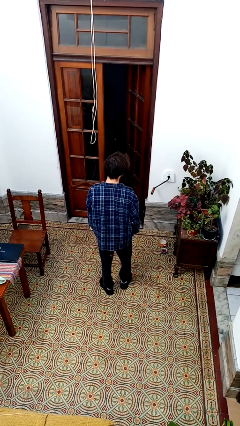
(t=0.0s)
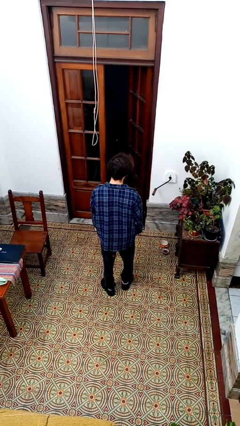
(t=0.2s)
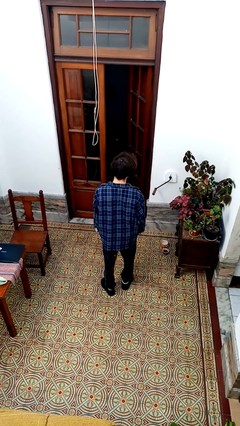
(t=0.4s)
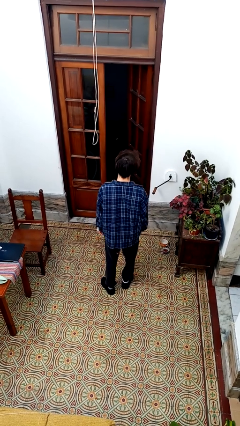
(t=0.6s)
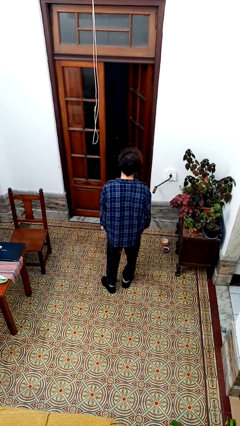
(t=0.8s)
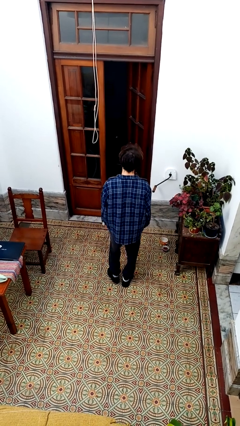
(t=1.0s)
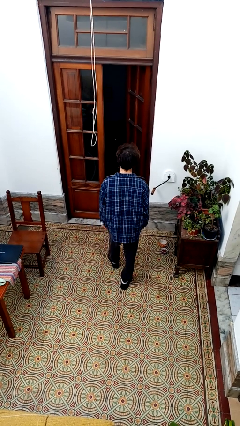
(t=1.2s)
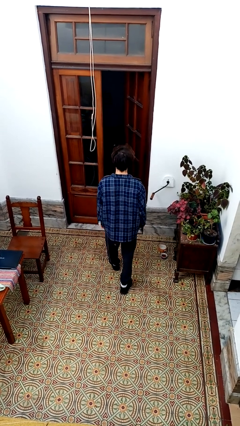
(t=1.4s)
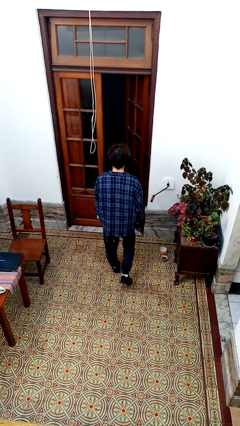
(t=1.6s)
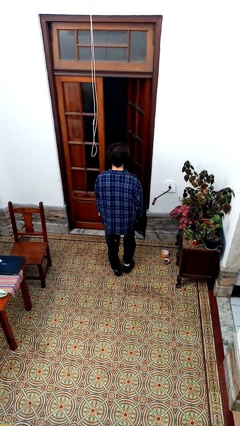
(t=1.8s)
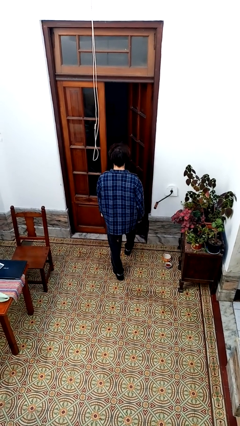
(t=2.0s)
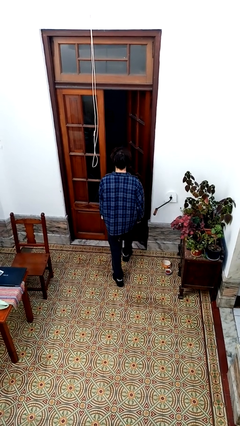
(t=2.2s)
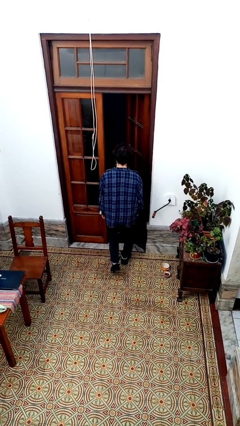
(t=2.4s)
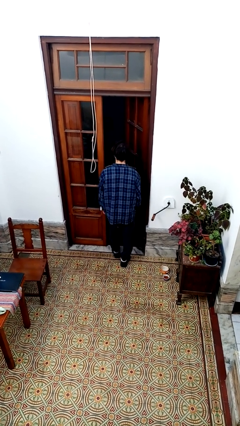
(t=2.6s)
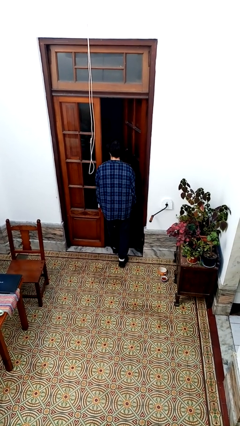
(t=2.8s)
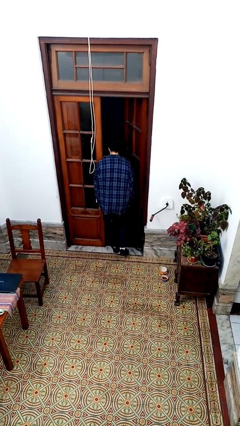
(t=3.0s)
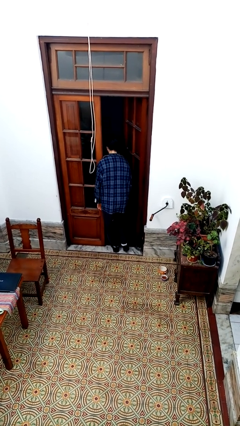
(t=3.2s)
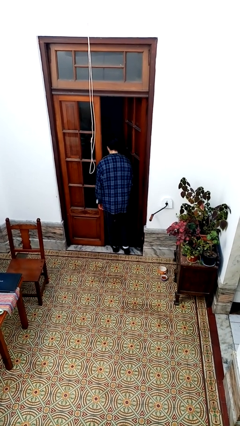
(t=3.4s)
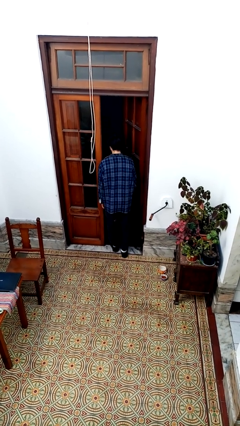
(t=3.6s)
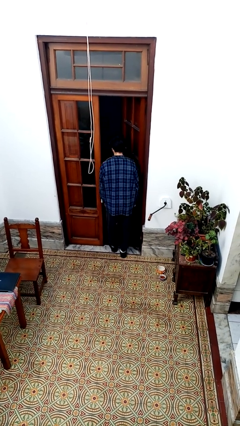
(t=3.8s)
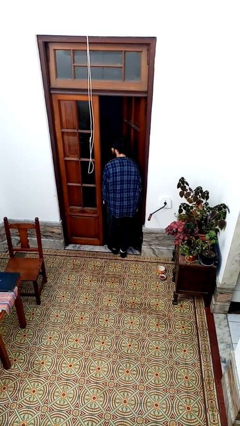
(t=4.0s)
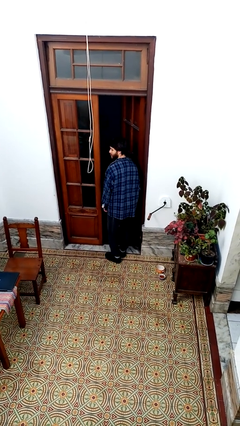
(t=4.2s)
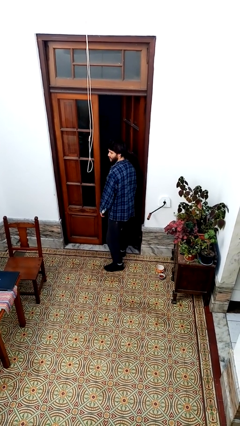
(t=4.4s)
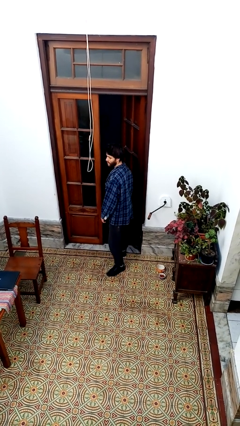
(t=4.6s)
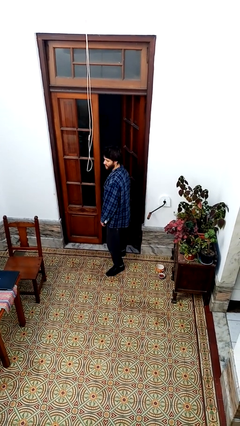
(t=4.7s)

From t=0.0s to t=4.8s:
person bumps into wall

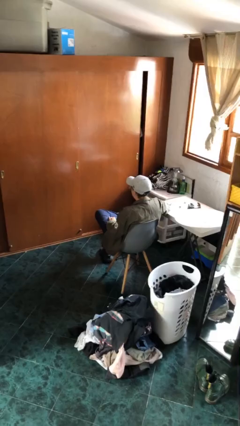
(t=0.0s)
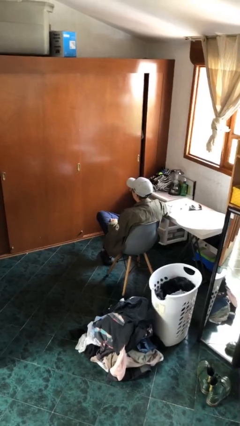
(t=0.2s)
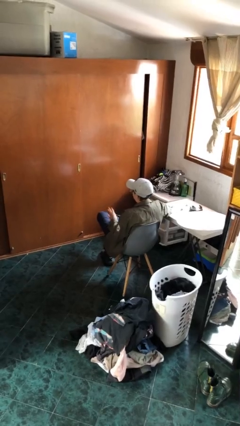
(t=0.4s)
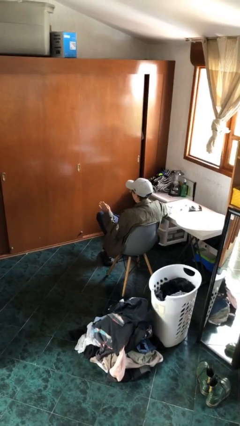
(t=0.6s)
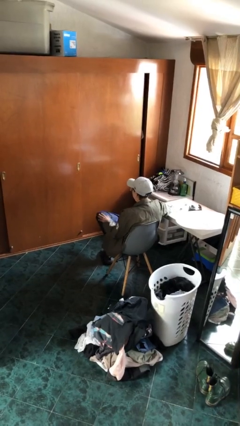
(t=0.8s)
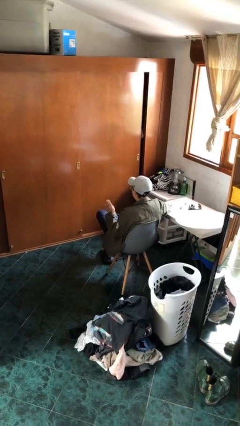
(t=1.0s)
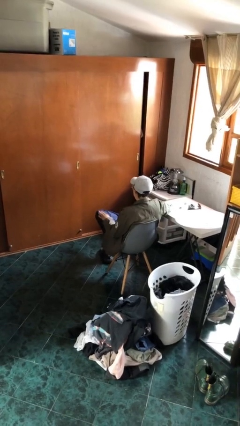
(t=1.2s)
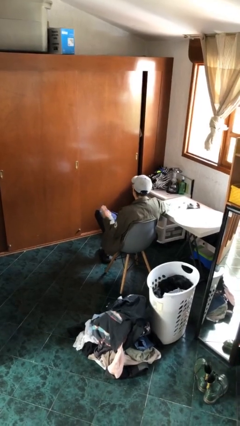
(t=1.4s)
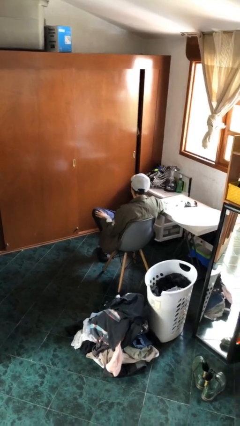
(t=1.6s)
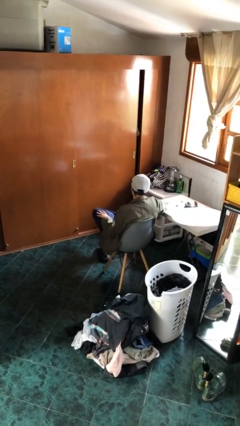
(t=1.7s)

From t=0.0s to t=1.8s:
person slaps hands on thighs

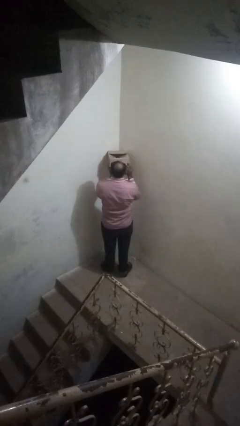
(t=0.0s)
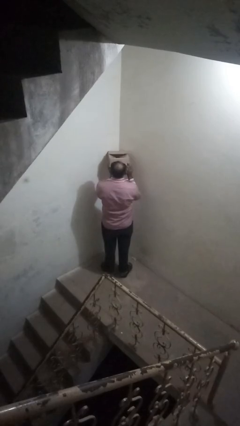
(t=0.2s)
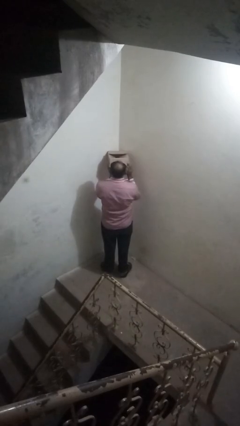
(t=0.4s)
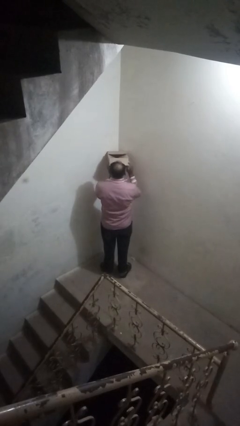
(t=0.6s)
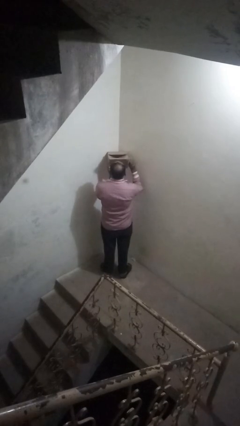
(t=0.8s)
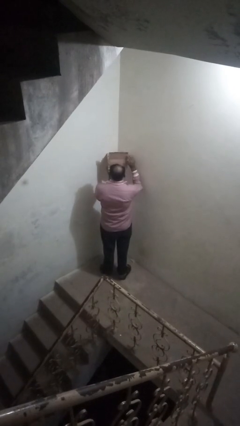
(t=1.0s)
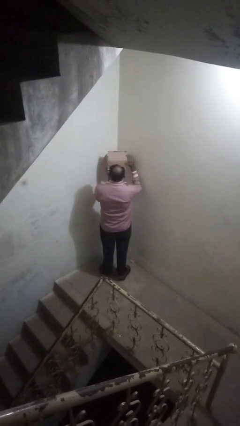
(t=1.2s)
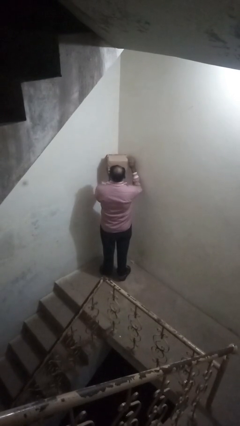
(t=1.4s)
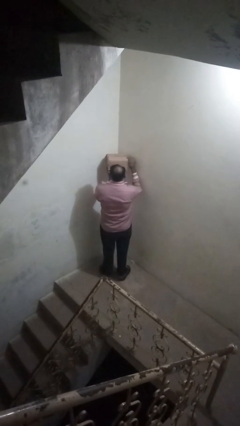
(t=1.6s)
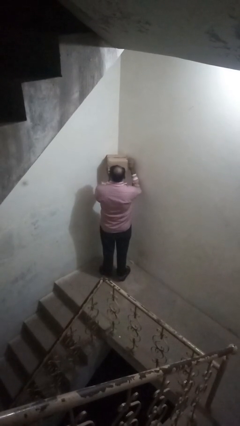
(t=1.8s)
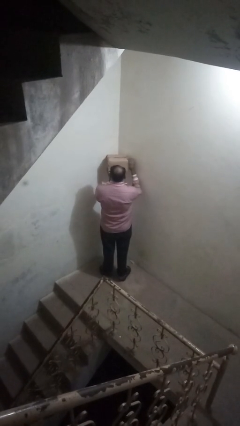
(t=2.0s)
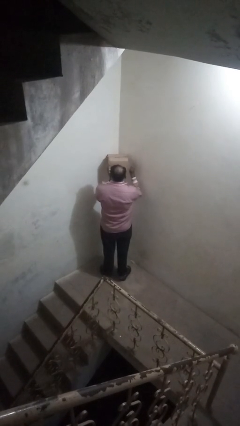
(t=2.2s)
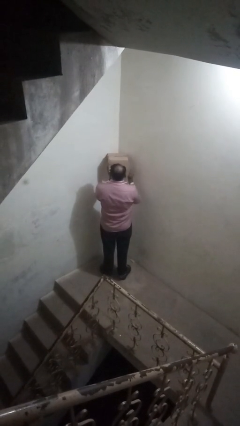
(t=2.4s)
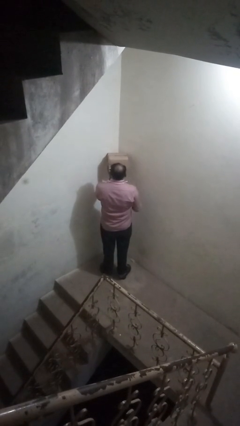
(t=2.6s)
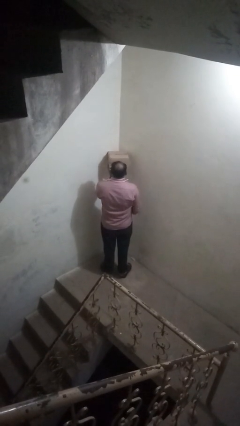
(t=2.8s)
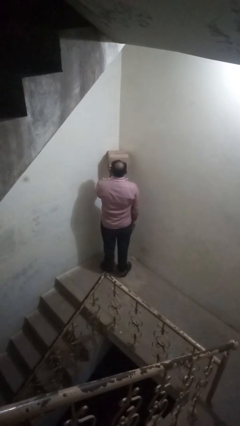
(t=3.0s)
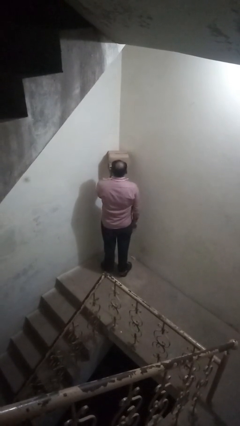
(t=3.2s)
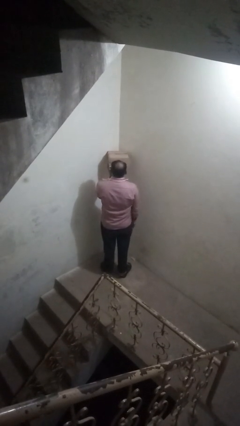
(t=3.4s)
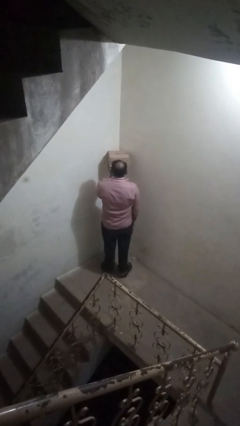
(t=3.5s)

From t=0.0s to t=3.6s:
person closes mailbox

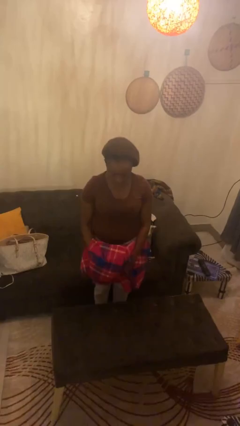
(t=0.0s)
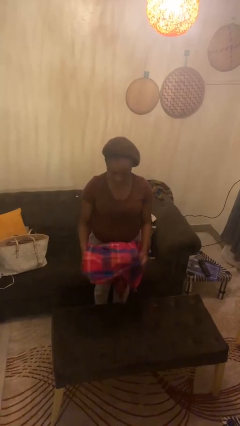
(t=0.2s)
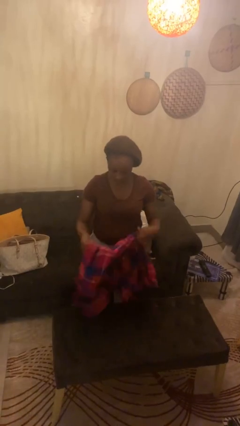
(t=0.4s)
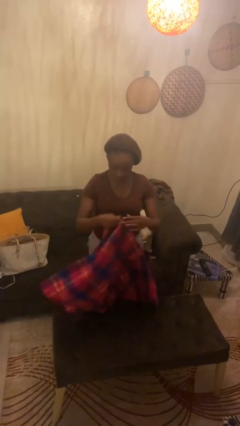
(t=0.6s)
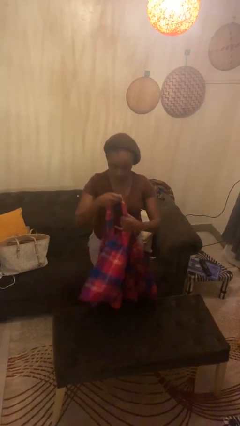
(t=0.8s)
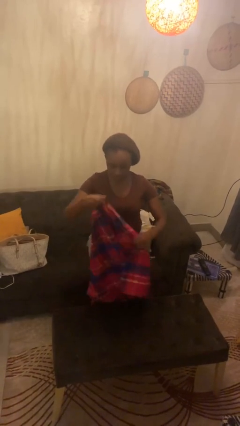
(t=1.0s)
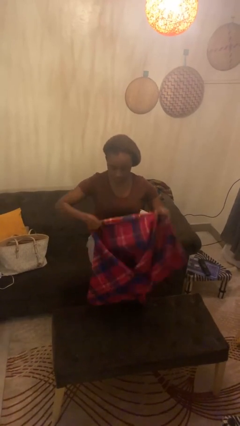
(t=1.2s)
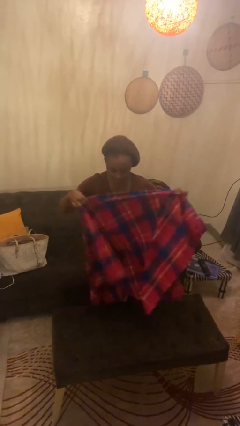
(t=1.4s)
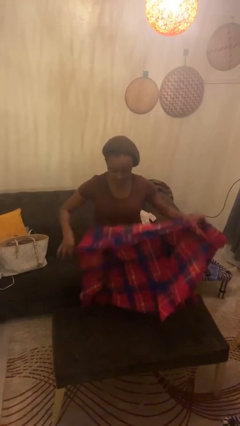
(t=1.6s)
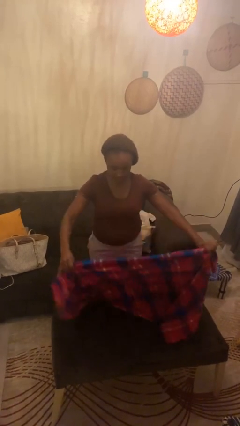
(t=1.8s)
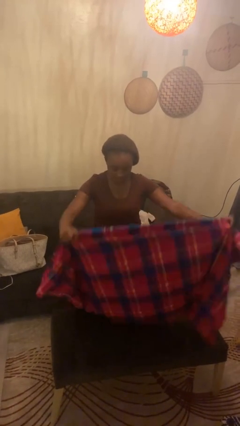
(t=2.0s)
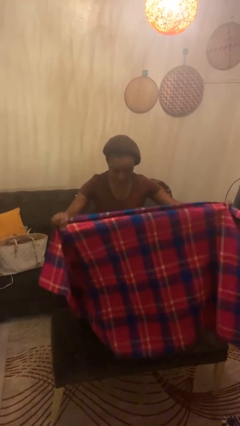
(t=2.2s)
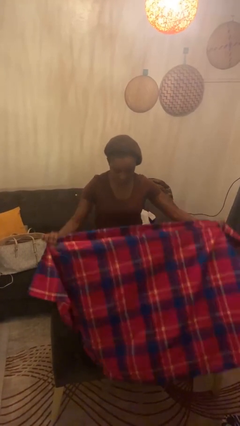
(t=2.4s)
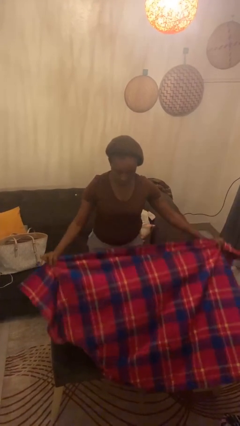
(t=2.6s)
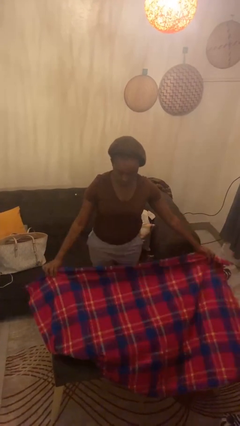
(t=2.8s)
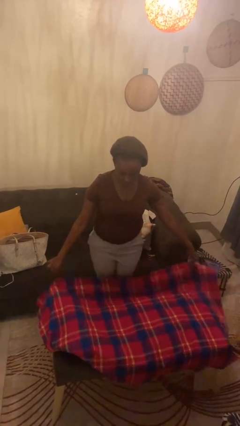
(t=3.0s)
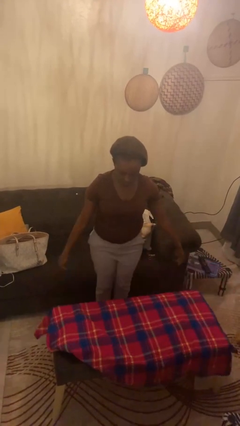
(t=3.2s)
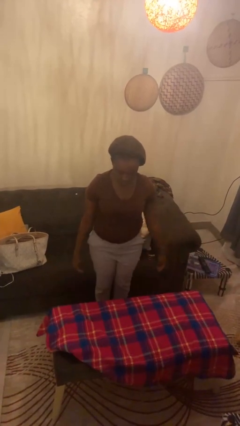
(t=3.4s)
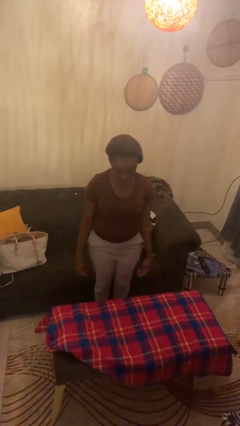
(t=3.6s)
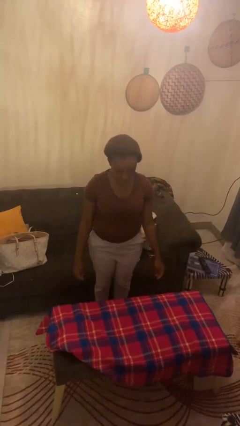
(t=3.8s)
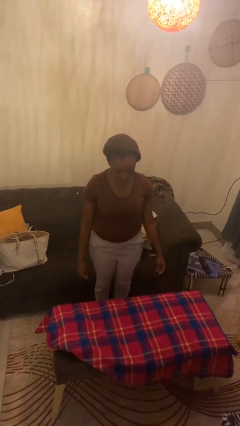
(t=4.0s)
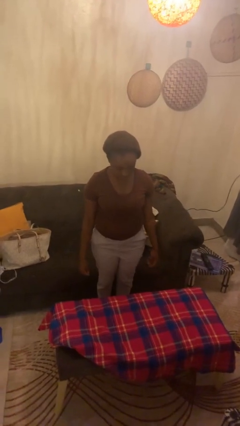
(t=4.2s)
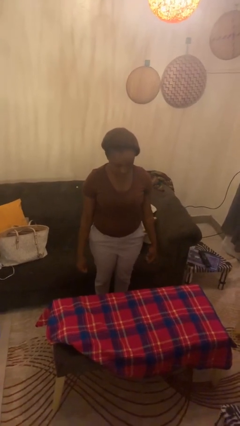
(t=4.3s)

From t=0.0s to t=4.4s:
person spreads tablecloth

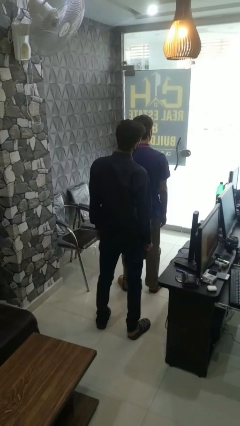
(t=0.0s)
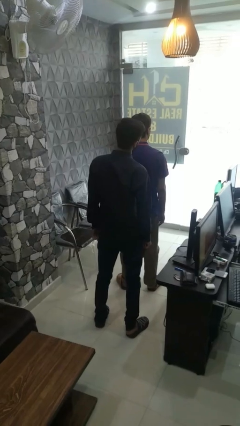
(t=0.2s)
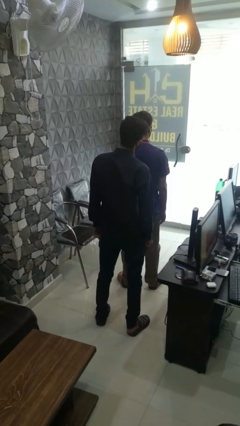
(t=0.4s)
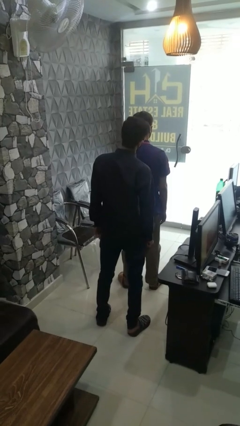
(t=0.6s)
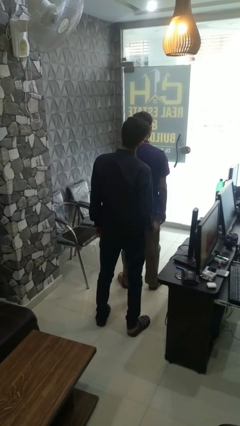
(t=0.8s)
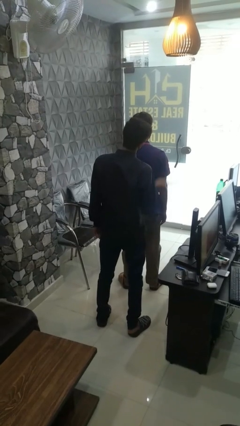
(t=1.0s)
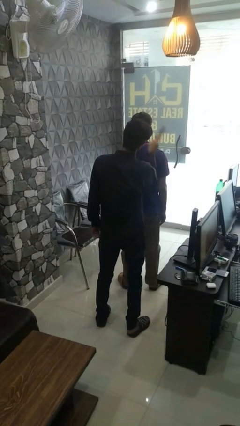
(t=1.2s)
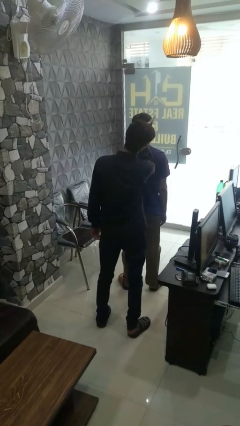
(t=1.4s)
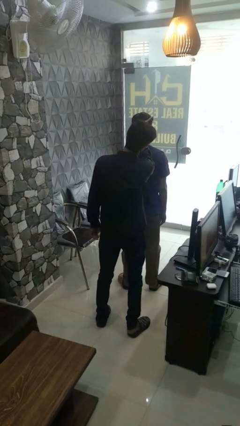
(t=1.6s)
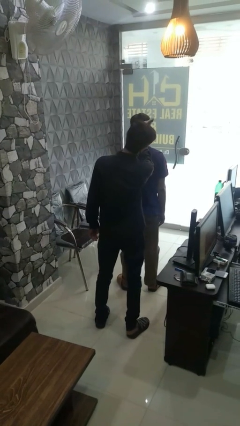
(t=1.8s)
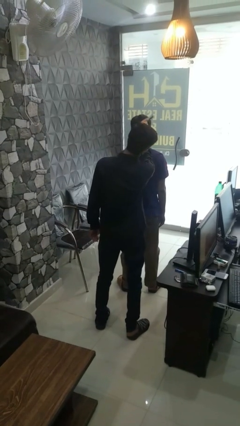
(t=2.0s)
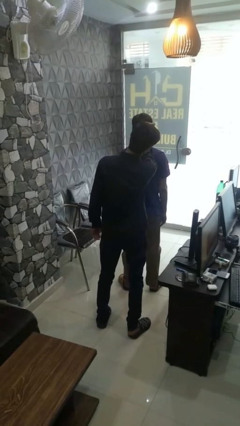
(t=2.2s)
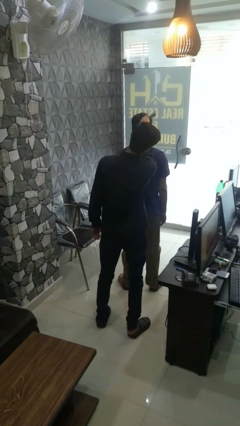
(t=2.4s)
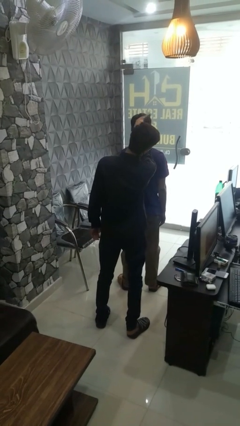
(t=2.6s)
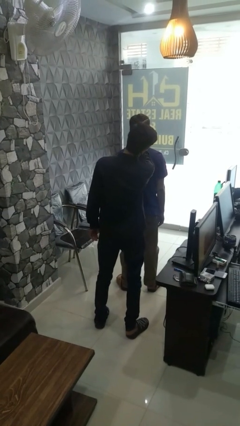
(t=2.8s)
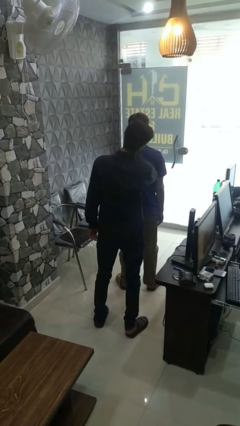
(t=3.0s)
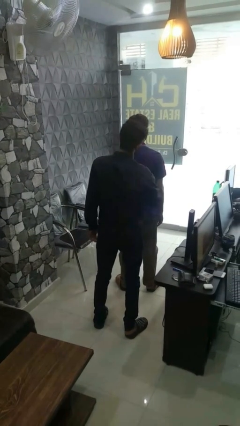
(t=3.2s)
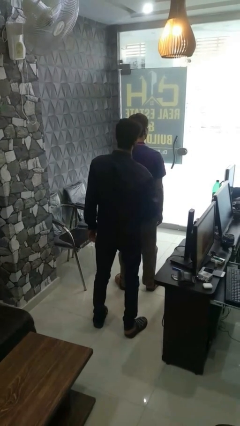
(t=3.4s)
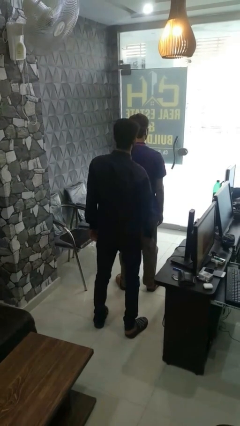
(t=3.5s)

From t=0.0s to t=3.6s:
person brushes hair of person
